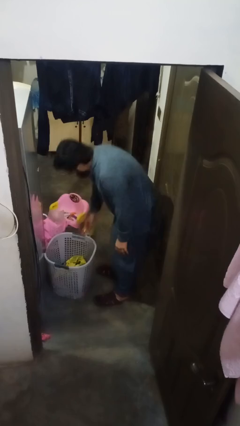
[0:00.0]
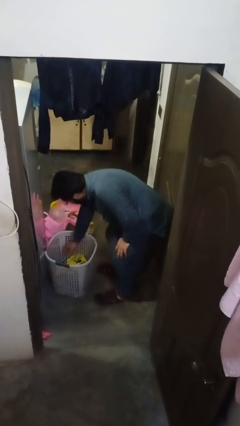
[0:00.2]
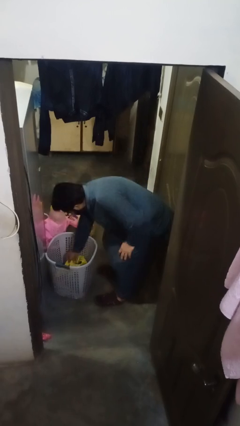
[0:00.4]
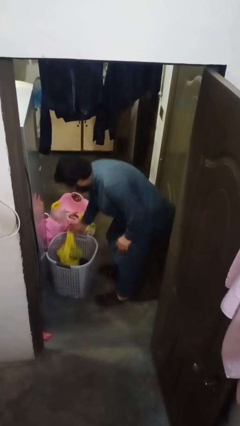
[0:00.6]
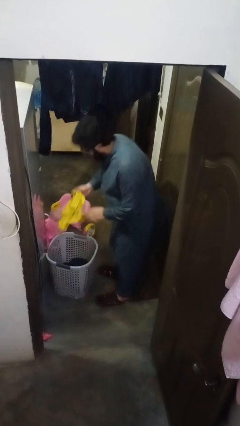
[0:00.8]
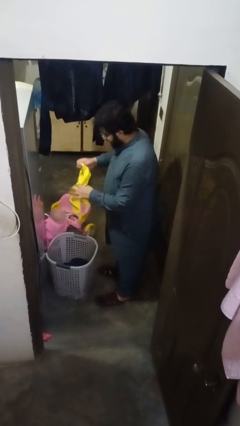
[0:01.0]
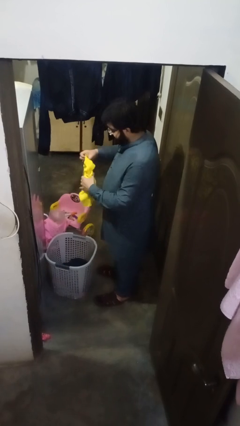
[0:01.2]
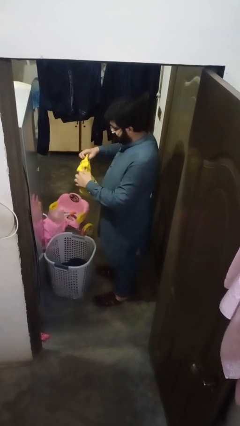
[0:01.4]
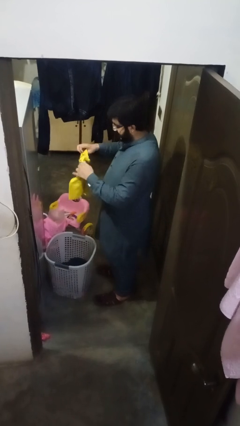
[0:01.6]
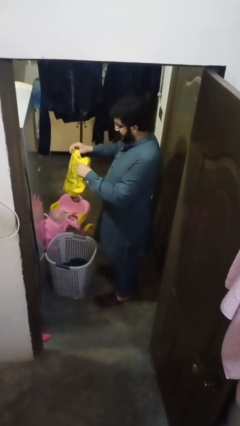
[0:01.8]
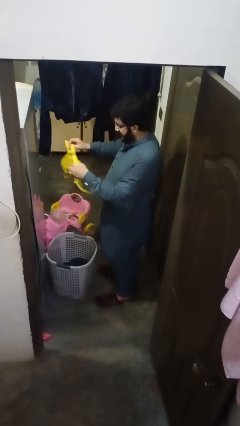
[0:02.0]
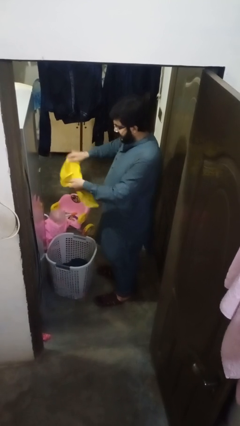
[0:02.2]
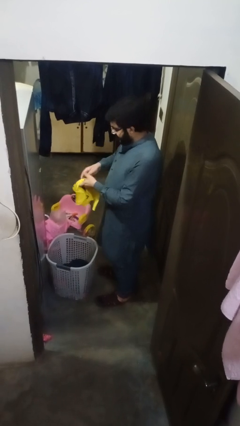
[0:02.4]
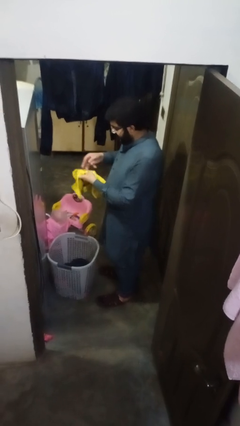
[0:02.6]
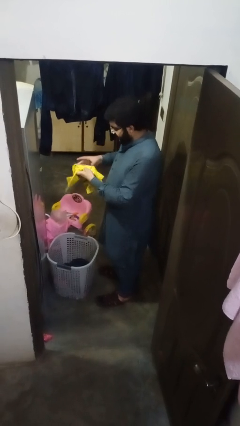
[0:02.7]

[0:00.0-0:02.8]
person folds shirt

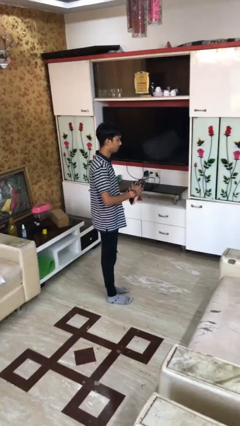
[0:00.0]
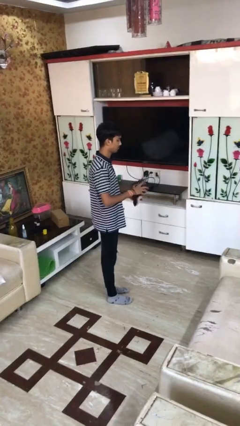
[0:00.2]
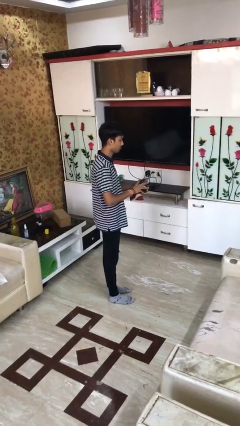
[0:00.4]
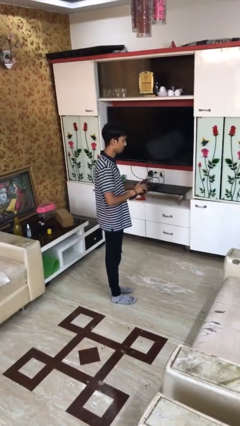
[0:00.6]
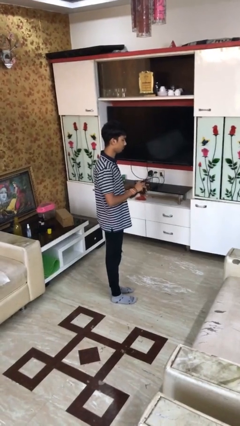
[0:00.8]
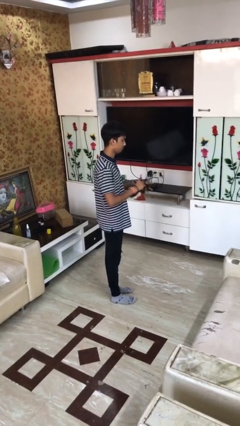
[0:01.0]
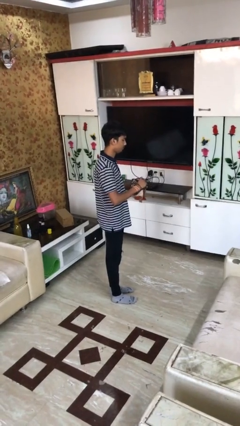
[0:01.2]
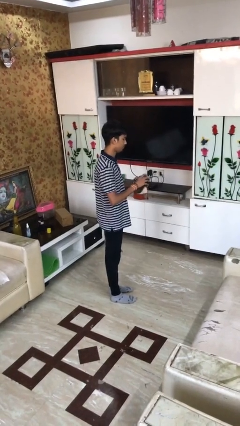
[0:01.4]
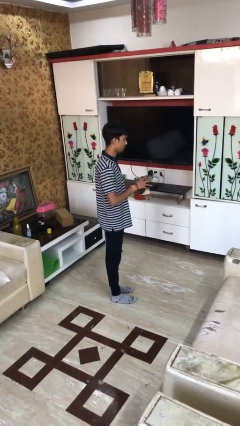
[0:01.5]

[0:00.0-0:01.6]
person squeezes object

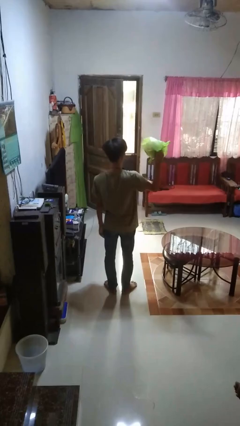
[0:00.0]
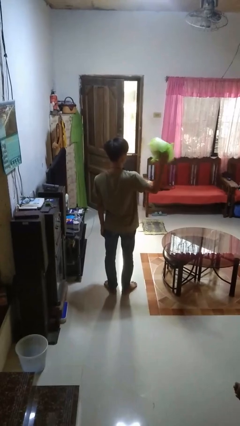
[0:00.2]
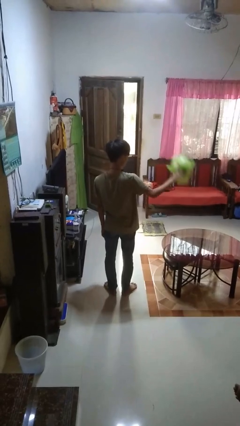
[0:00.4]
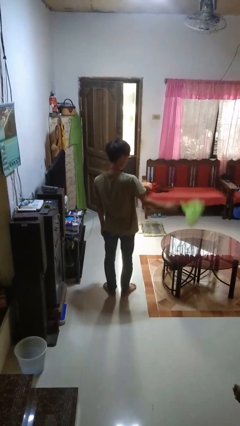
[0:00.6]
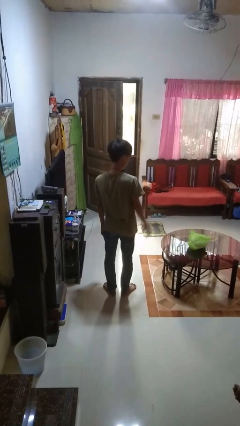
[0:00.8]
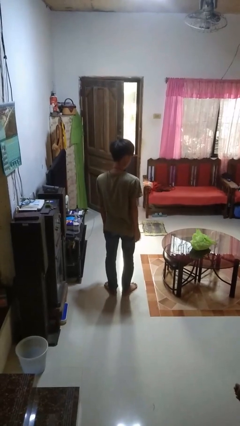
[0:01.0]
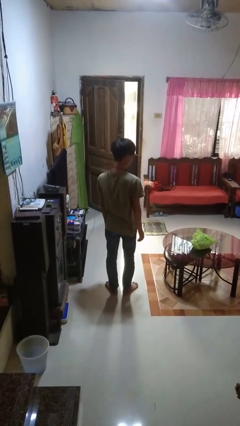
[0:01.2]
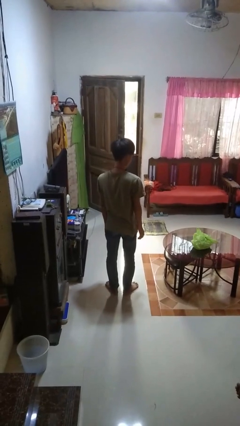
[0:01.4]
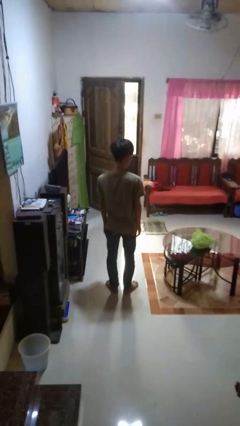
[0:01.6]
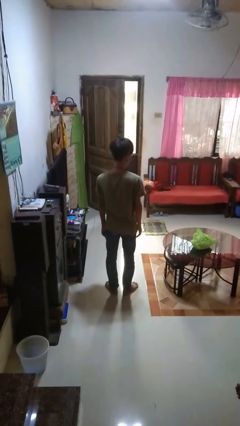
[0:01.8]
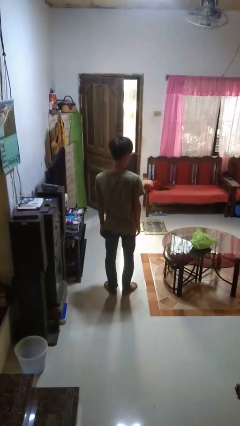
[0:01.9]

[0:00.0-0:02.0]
person throws object on table

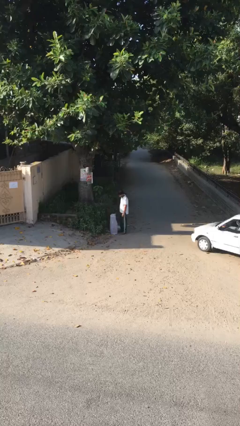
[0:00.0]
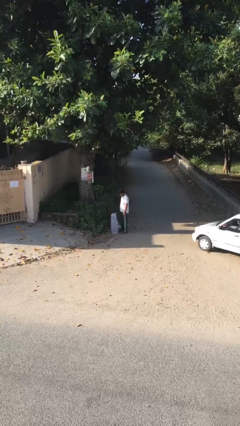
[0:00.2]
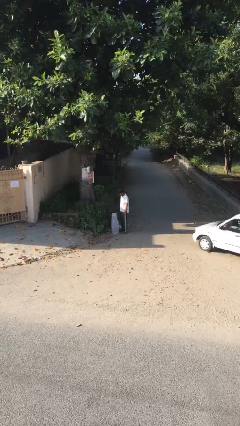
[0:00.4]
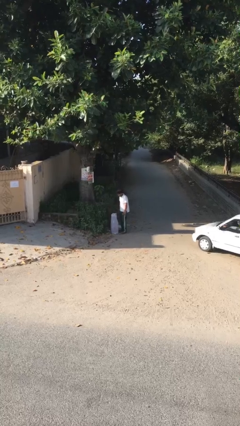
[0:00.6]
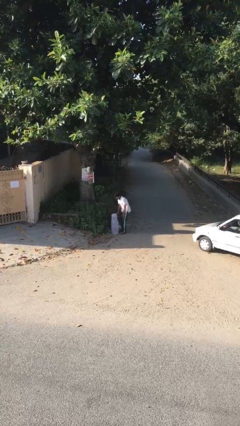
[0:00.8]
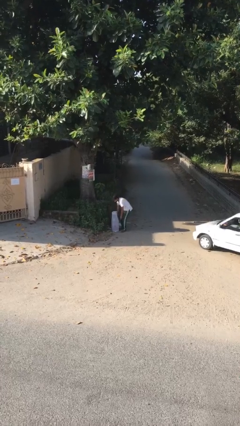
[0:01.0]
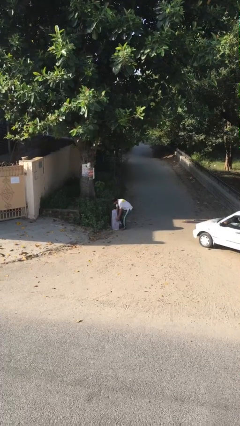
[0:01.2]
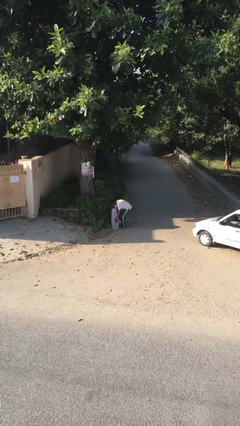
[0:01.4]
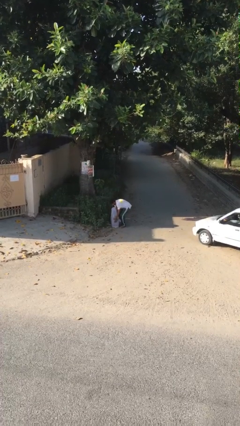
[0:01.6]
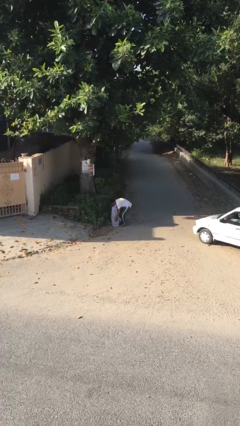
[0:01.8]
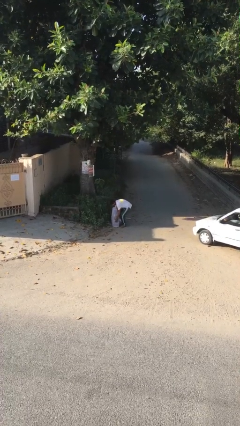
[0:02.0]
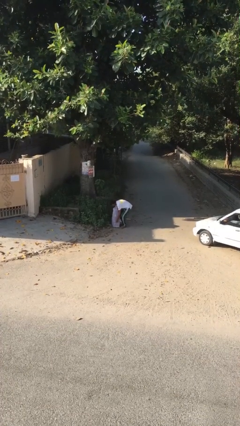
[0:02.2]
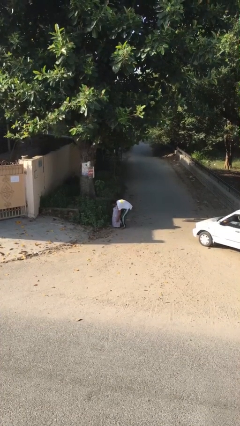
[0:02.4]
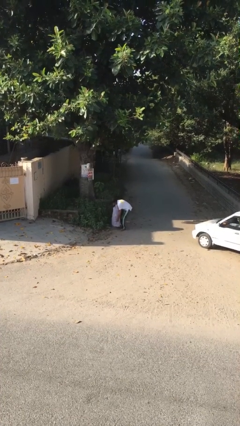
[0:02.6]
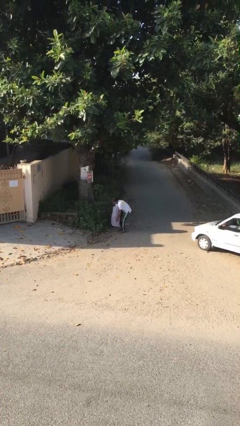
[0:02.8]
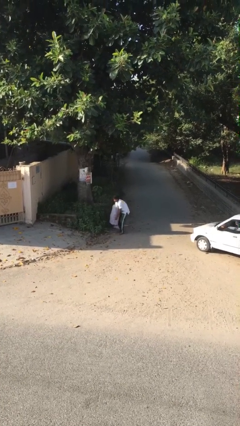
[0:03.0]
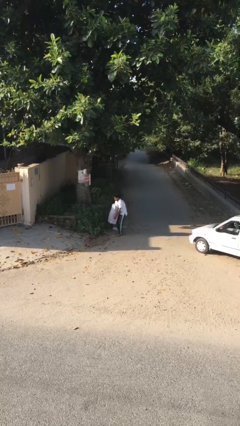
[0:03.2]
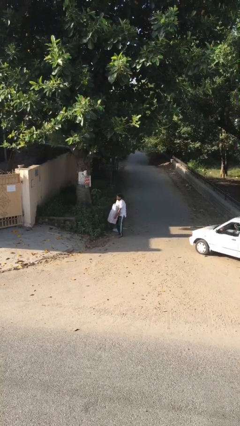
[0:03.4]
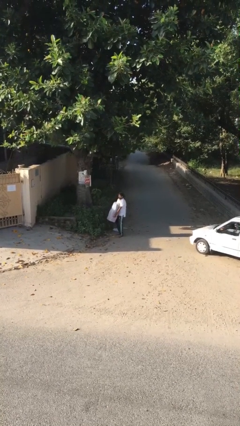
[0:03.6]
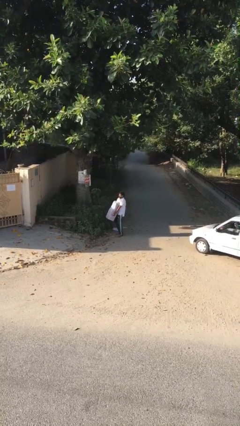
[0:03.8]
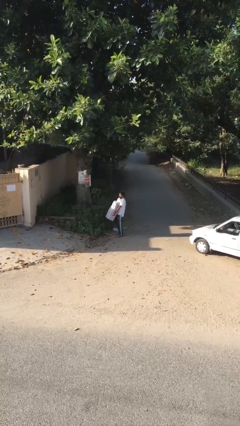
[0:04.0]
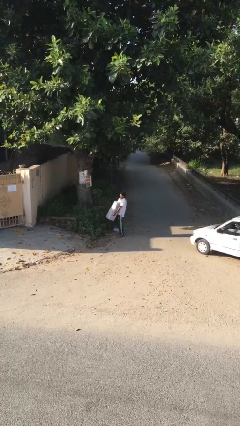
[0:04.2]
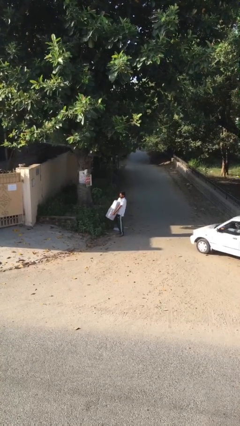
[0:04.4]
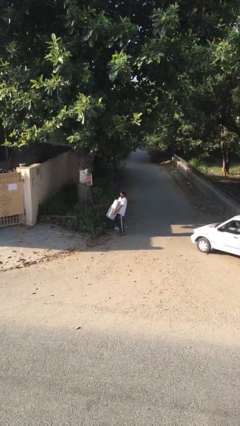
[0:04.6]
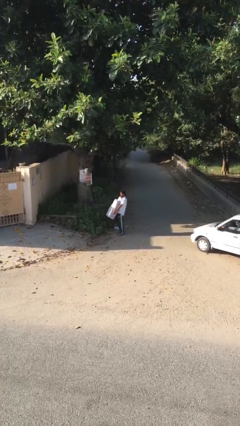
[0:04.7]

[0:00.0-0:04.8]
person picks up object from floor

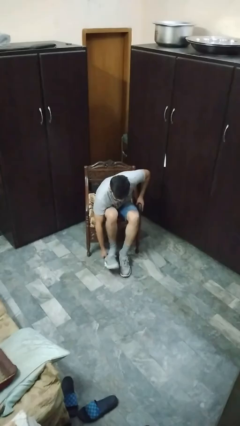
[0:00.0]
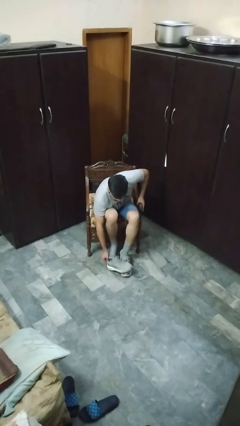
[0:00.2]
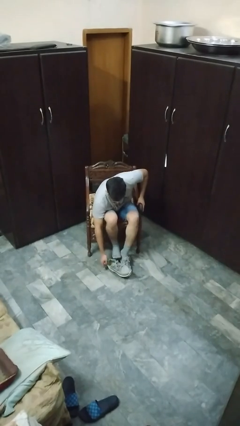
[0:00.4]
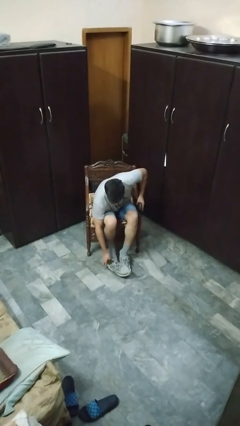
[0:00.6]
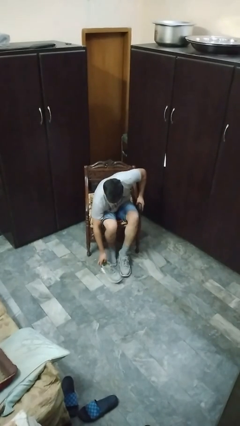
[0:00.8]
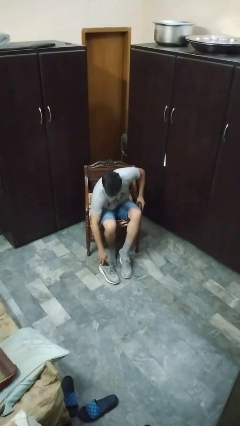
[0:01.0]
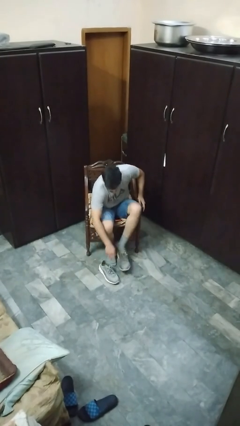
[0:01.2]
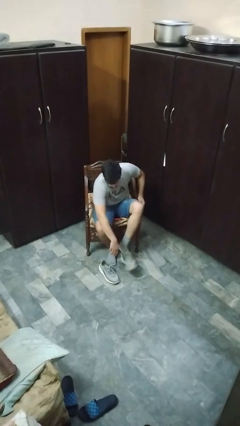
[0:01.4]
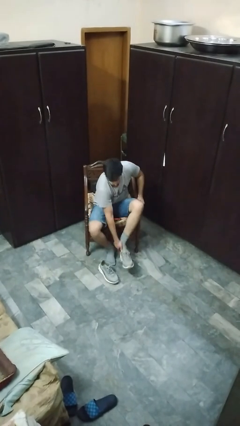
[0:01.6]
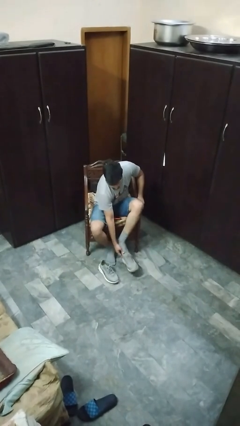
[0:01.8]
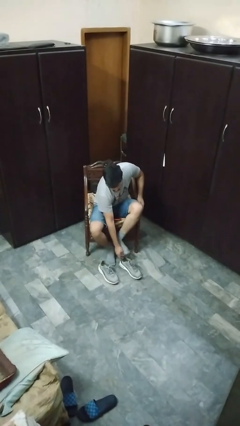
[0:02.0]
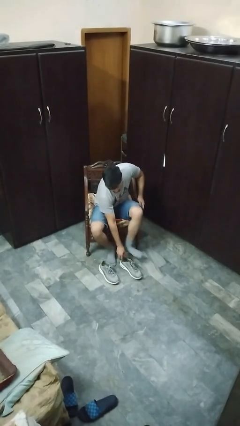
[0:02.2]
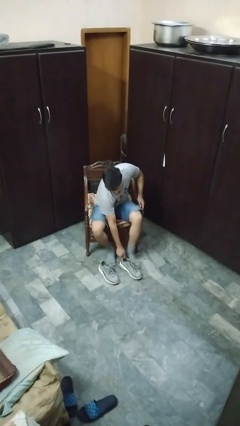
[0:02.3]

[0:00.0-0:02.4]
person takes off shoes

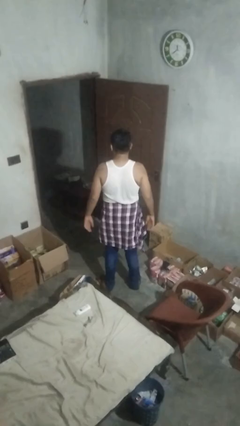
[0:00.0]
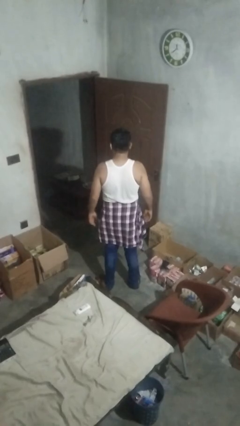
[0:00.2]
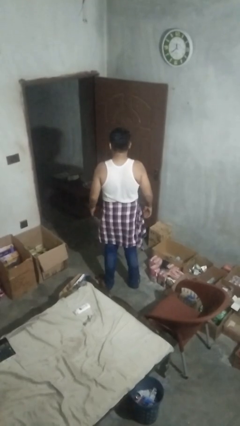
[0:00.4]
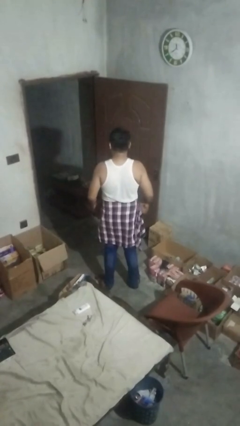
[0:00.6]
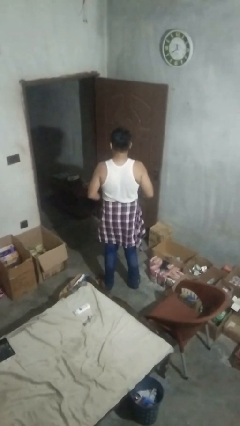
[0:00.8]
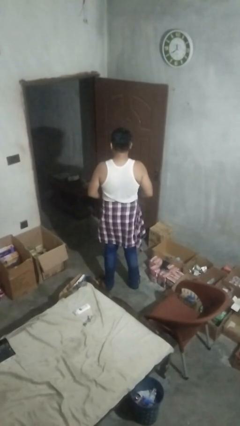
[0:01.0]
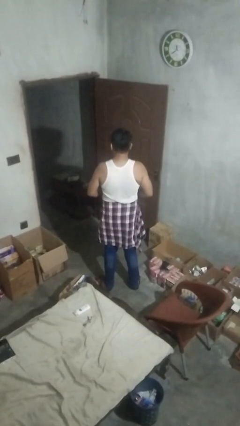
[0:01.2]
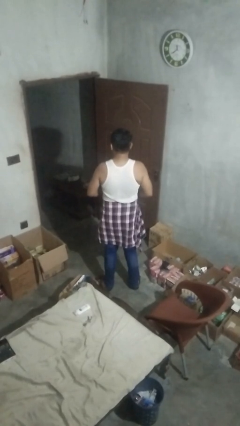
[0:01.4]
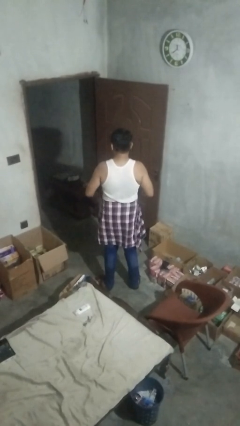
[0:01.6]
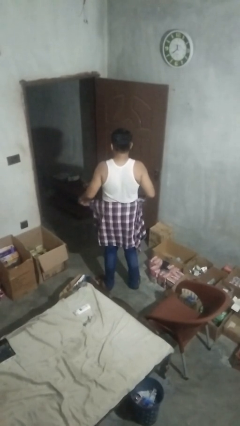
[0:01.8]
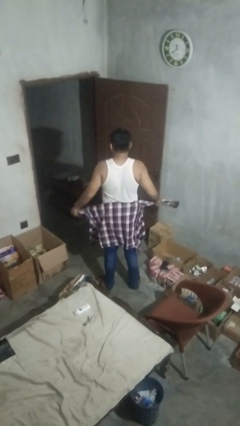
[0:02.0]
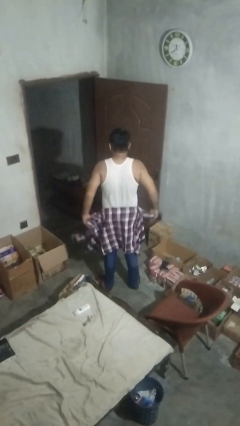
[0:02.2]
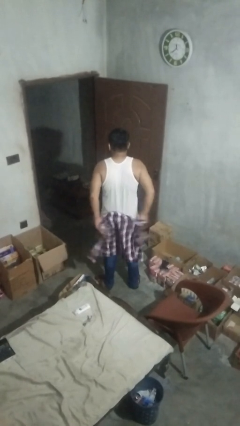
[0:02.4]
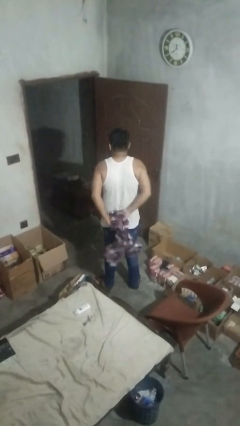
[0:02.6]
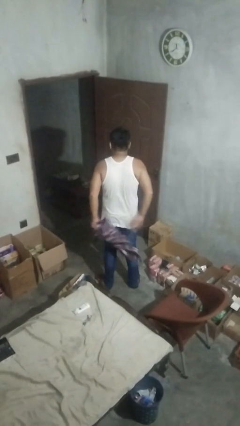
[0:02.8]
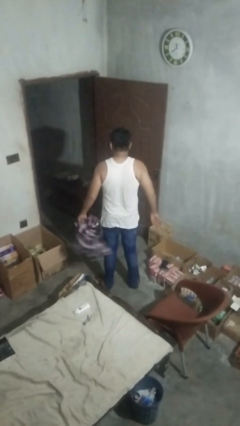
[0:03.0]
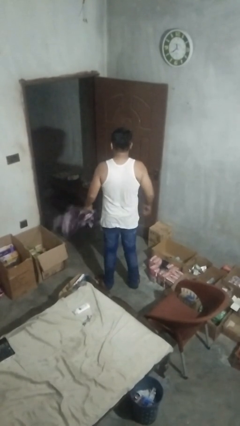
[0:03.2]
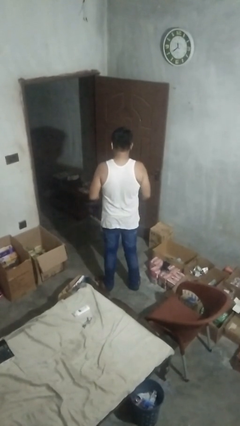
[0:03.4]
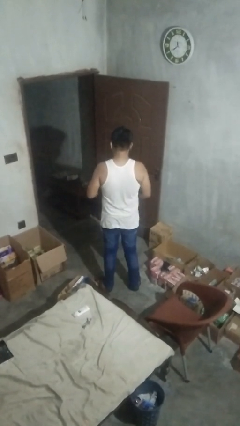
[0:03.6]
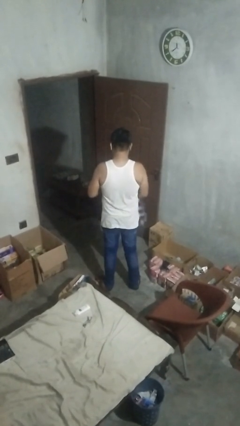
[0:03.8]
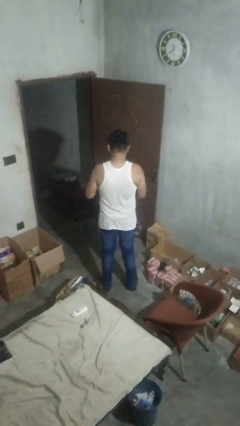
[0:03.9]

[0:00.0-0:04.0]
person unties jacket around waist
